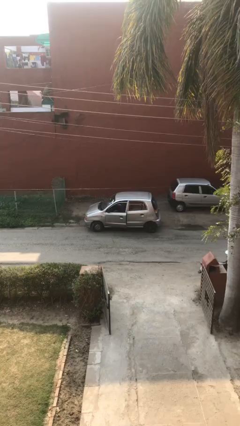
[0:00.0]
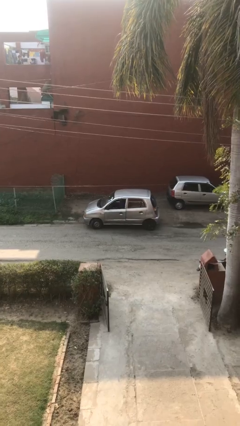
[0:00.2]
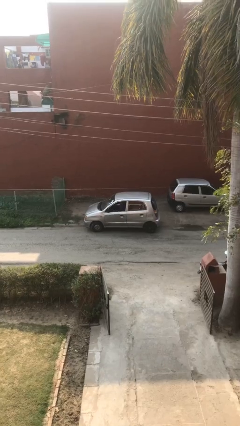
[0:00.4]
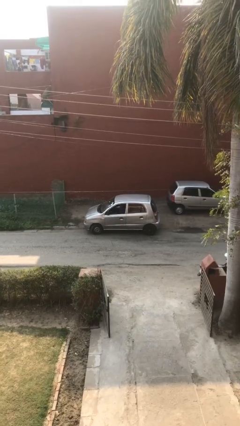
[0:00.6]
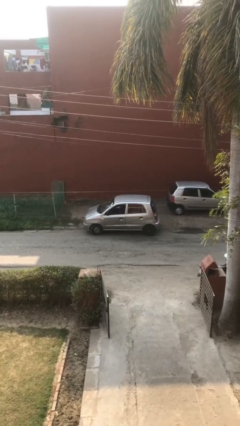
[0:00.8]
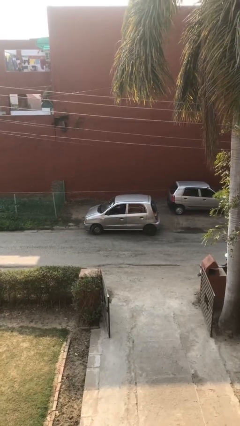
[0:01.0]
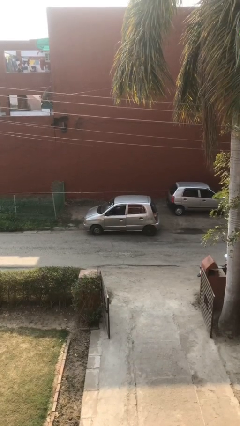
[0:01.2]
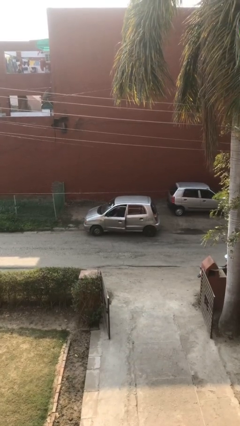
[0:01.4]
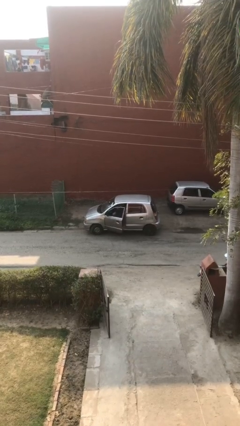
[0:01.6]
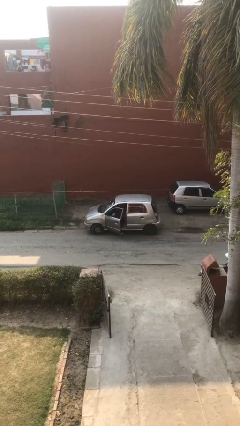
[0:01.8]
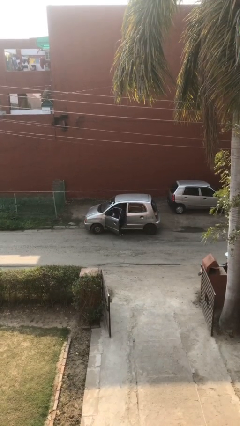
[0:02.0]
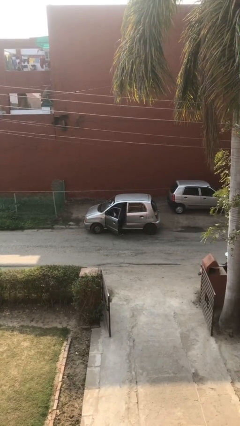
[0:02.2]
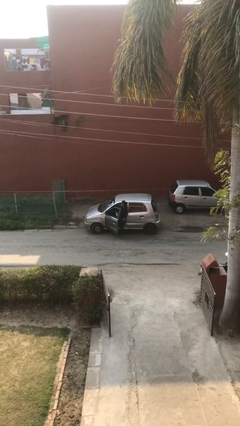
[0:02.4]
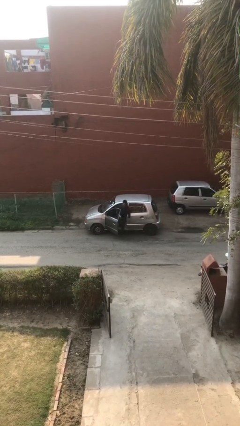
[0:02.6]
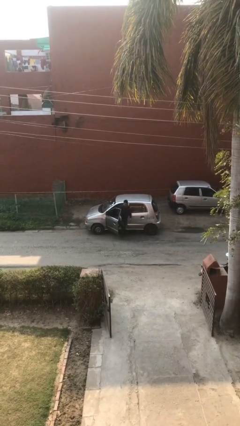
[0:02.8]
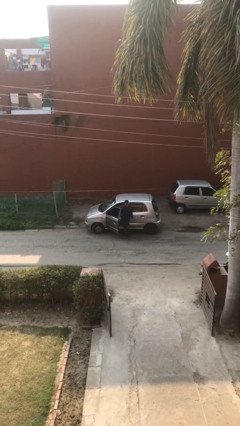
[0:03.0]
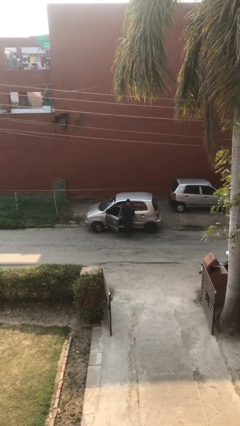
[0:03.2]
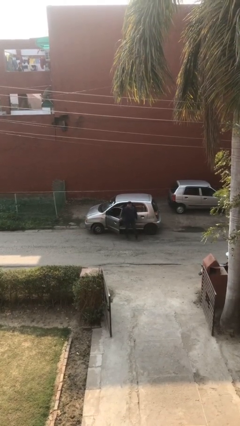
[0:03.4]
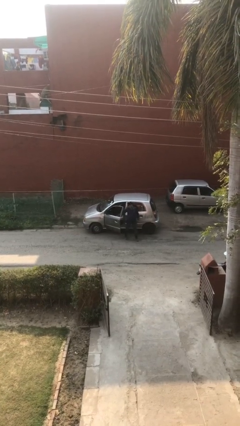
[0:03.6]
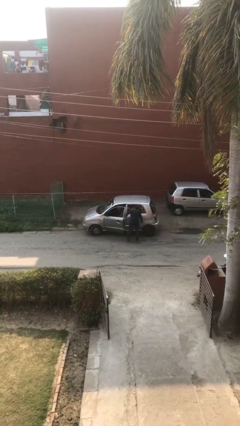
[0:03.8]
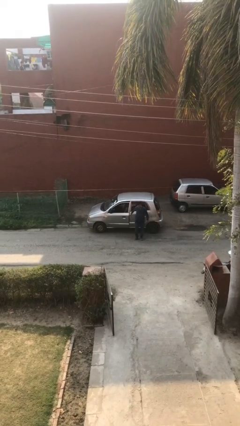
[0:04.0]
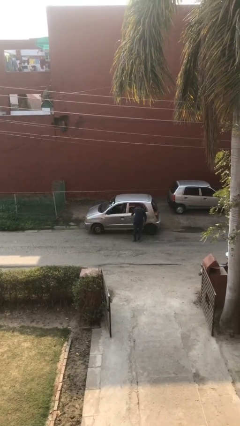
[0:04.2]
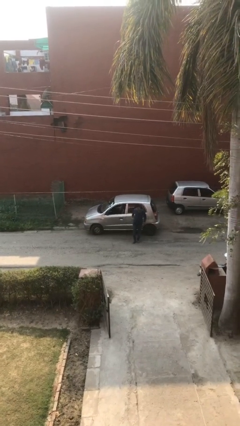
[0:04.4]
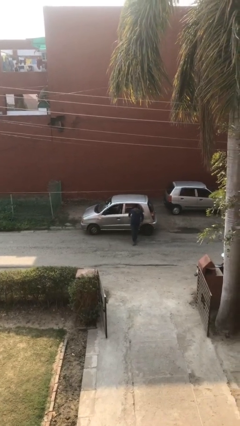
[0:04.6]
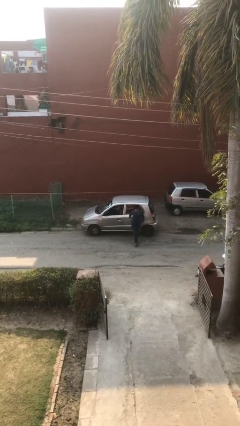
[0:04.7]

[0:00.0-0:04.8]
car drops off person

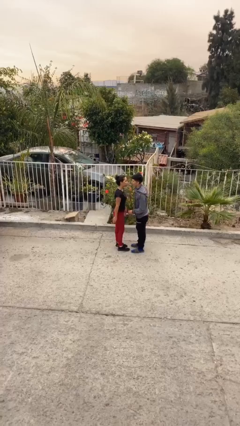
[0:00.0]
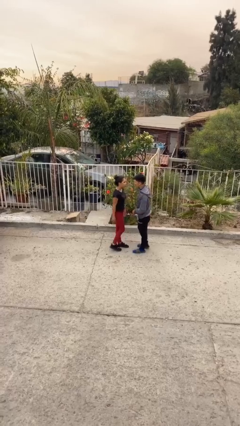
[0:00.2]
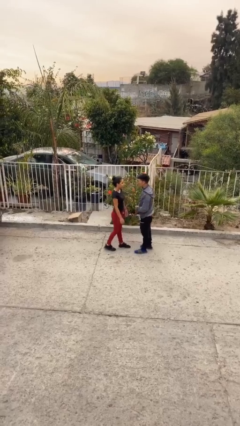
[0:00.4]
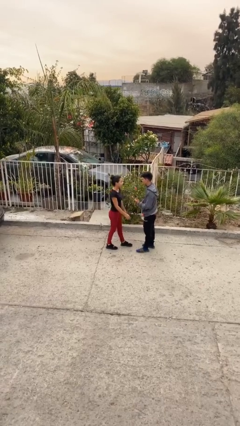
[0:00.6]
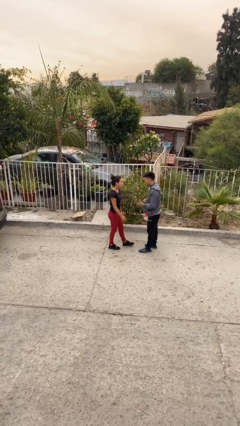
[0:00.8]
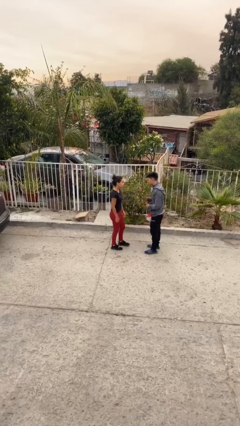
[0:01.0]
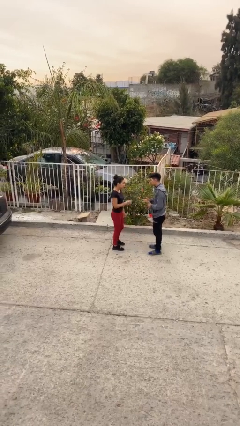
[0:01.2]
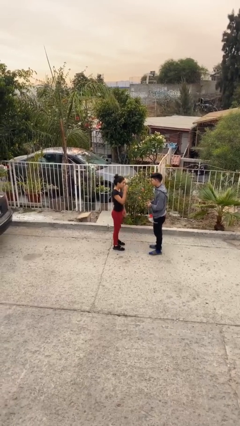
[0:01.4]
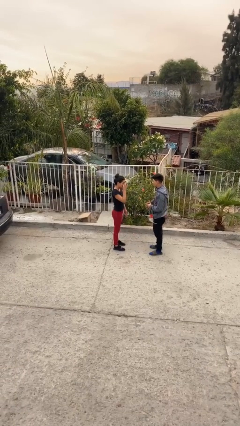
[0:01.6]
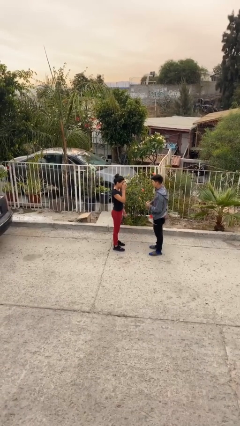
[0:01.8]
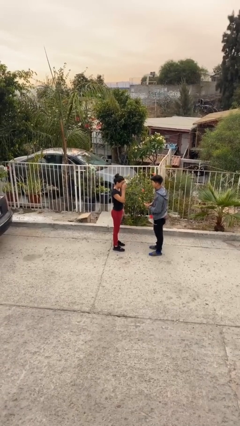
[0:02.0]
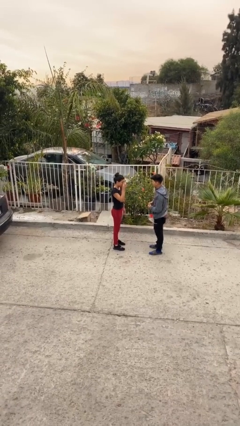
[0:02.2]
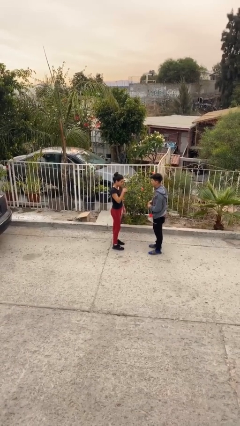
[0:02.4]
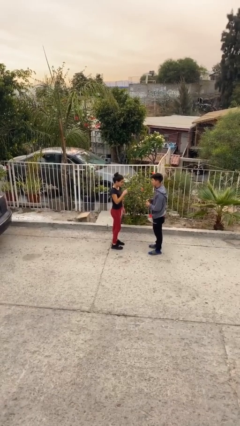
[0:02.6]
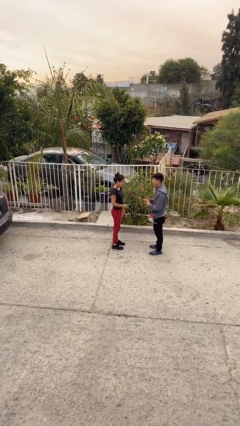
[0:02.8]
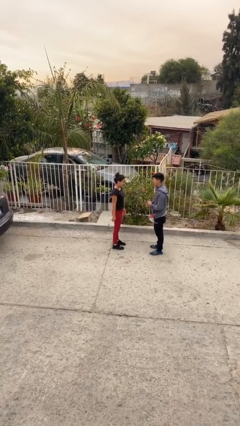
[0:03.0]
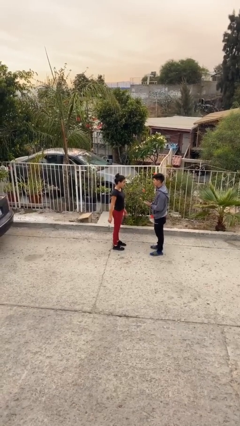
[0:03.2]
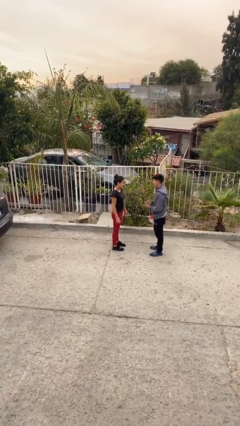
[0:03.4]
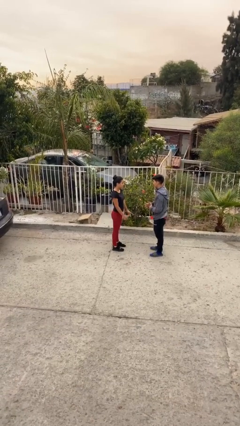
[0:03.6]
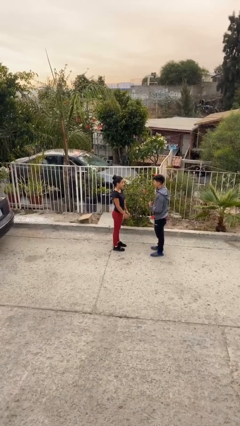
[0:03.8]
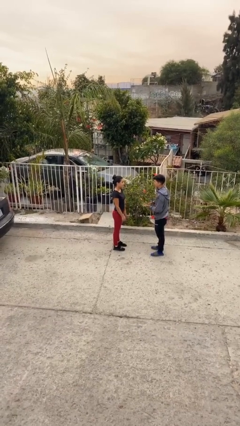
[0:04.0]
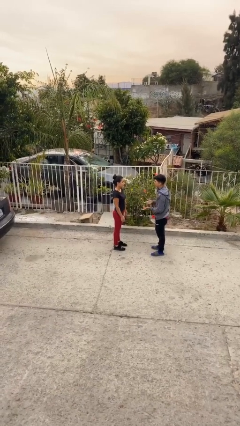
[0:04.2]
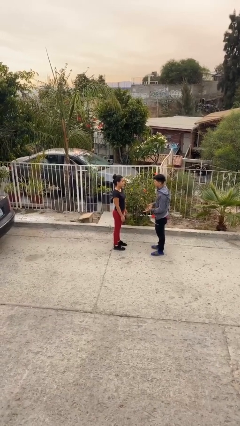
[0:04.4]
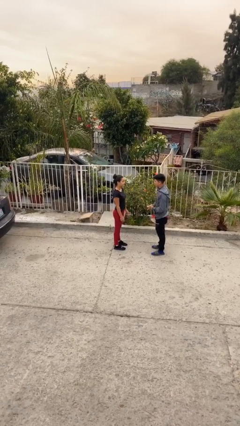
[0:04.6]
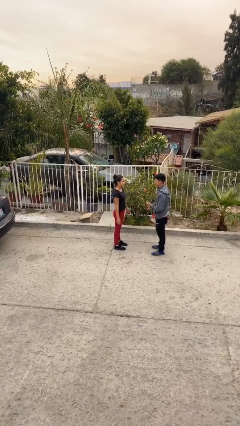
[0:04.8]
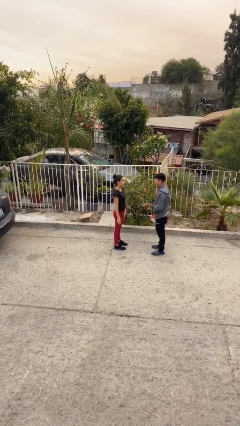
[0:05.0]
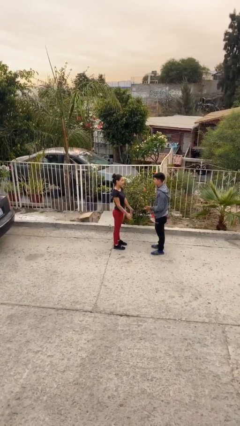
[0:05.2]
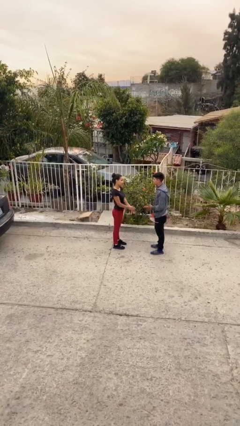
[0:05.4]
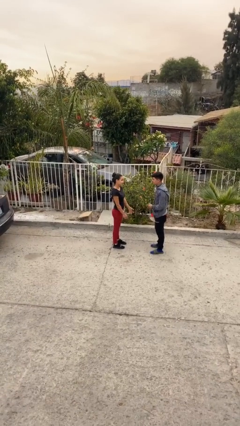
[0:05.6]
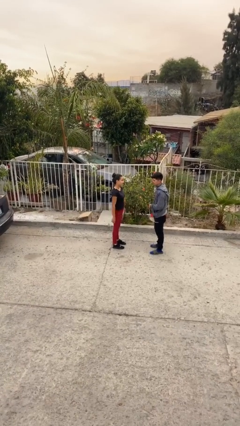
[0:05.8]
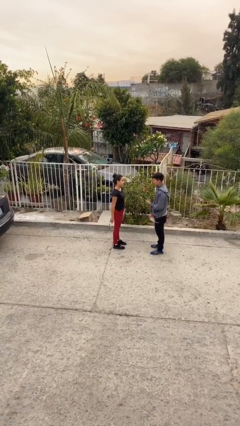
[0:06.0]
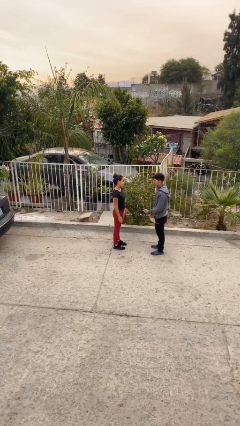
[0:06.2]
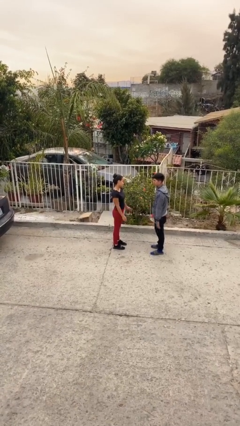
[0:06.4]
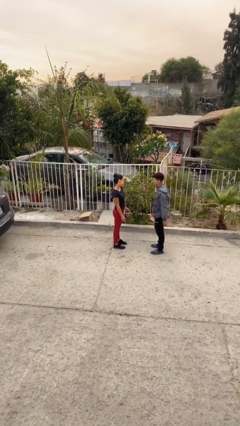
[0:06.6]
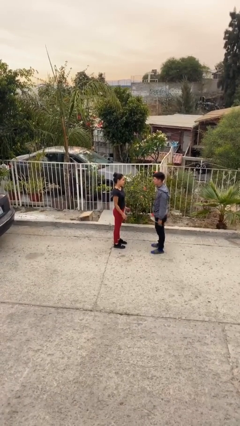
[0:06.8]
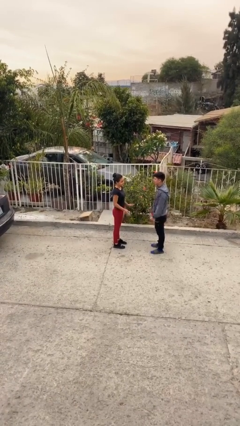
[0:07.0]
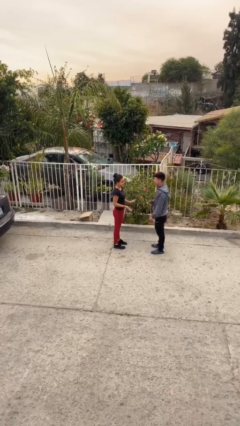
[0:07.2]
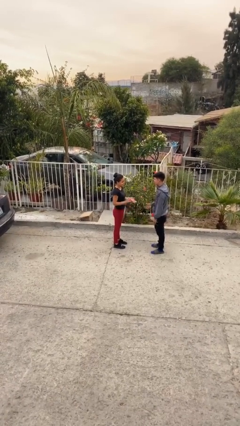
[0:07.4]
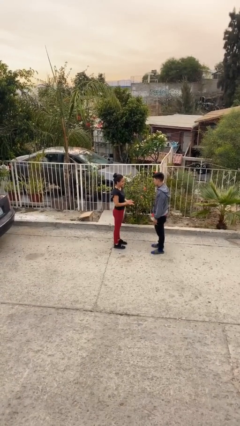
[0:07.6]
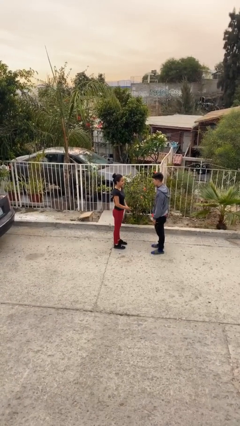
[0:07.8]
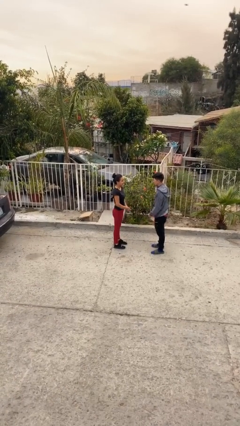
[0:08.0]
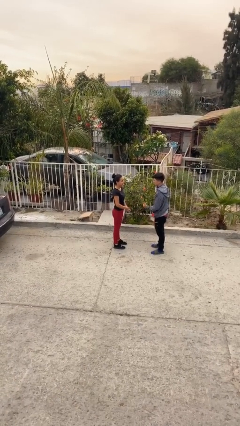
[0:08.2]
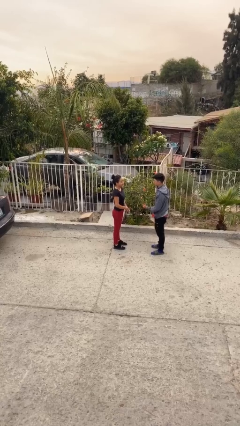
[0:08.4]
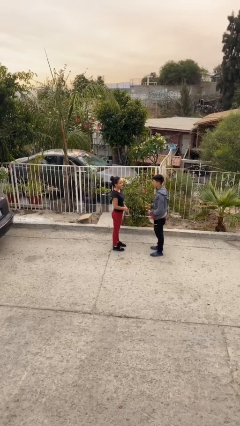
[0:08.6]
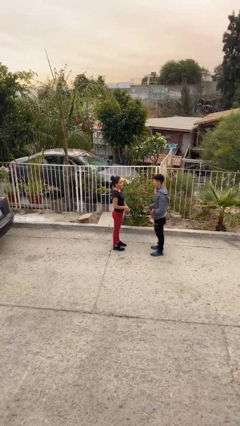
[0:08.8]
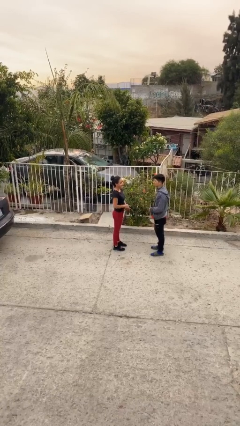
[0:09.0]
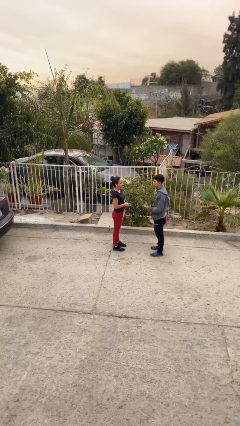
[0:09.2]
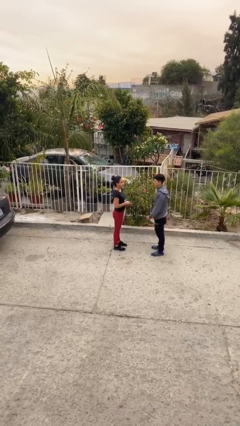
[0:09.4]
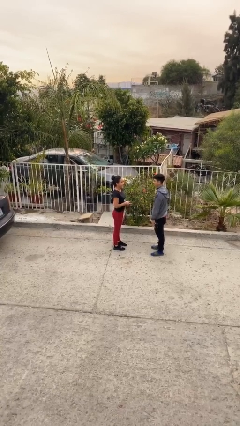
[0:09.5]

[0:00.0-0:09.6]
person talks to person

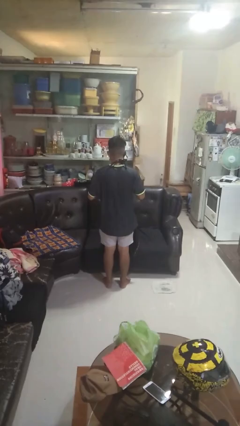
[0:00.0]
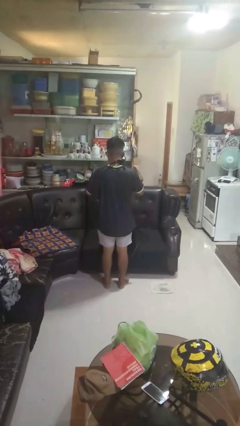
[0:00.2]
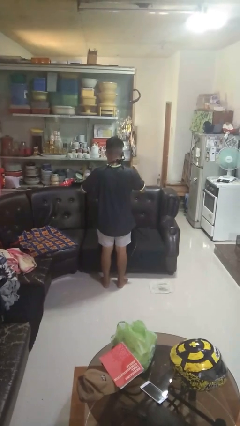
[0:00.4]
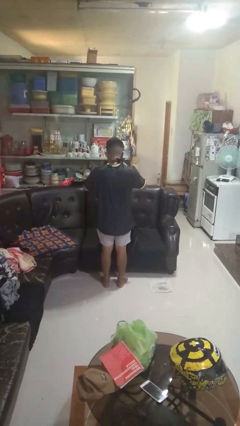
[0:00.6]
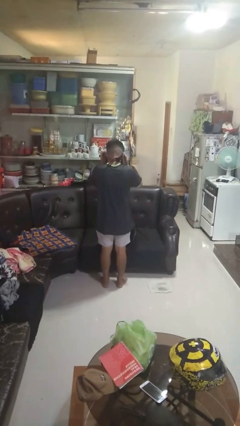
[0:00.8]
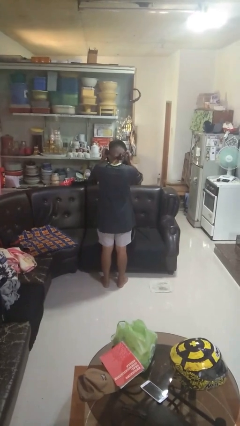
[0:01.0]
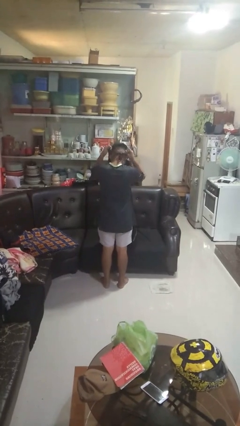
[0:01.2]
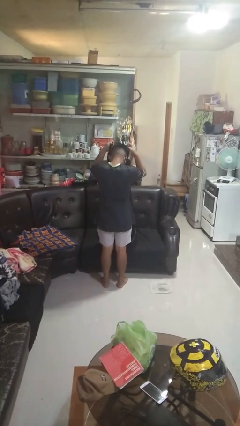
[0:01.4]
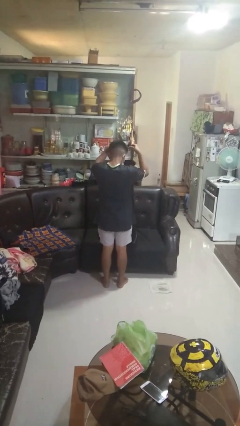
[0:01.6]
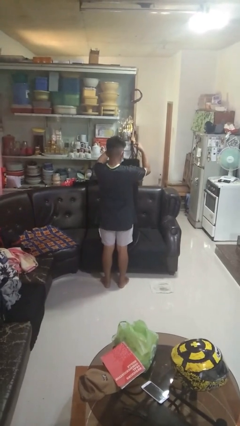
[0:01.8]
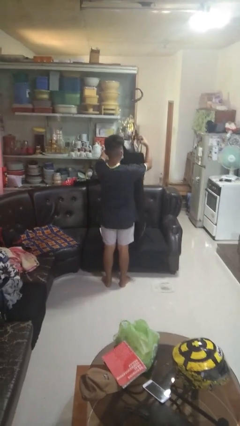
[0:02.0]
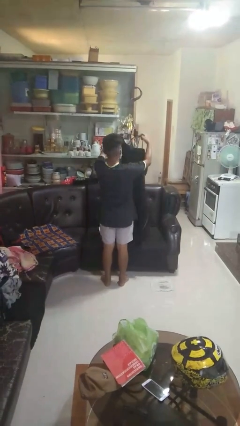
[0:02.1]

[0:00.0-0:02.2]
person takes off apron

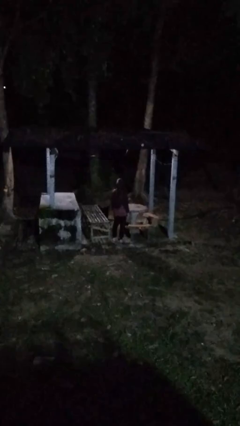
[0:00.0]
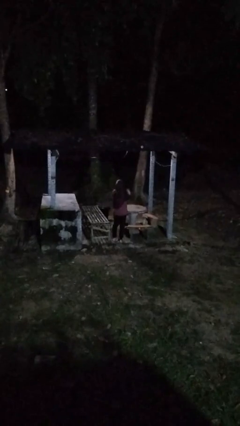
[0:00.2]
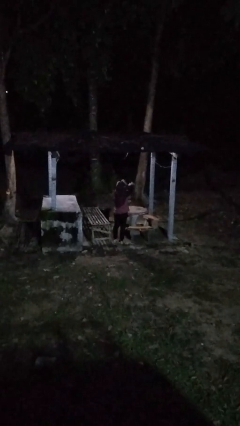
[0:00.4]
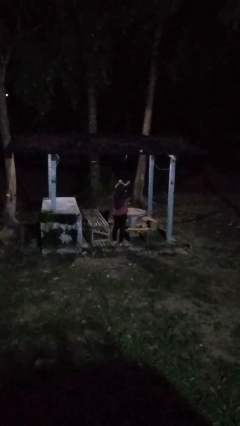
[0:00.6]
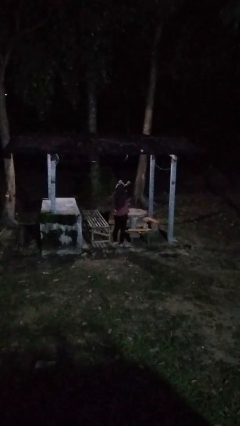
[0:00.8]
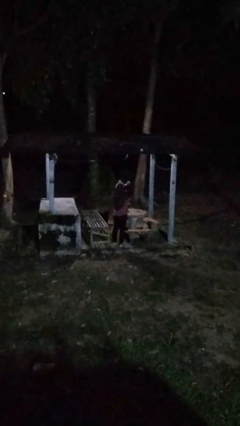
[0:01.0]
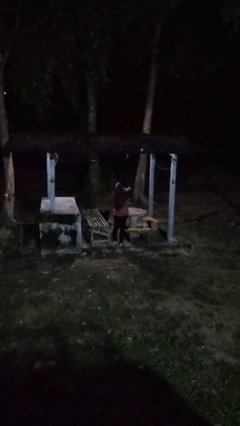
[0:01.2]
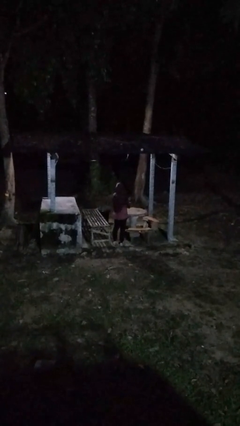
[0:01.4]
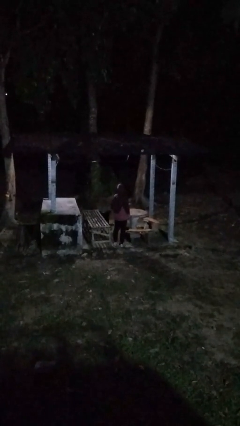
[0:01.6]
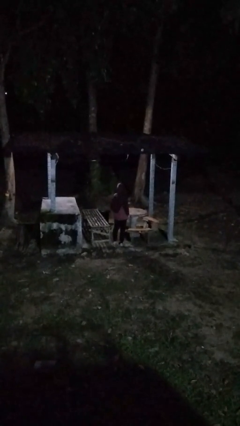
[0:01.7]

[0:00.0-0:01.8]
person gestures arms x
